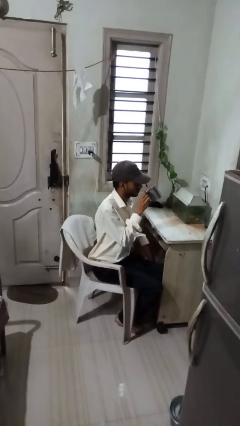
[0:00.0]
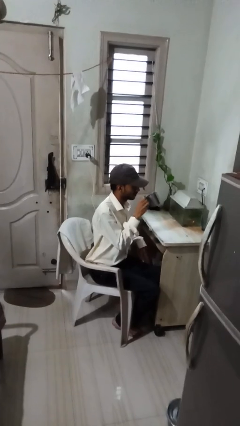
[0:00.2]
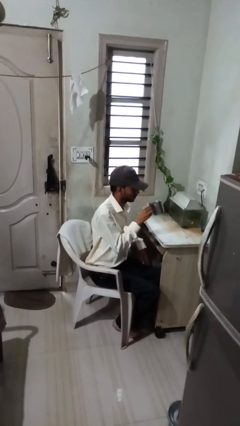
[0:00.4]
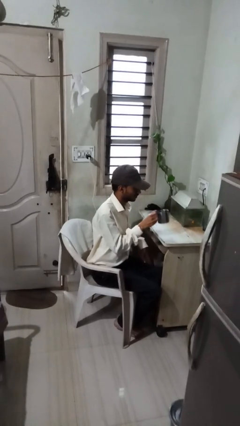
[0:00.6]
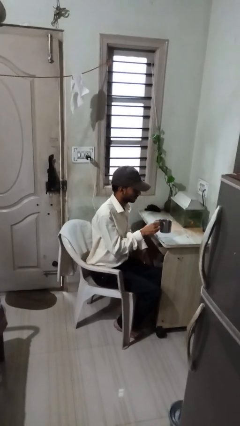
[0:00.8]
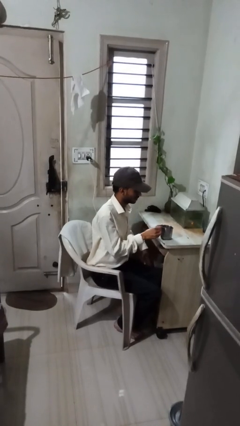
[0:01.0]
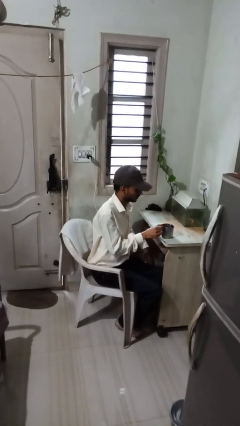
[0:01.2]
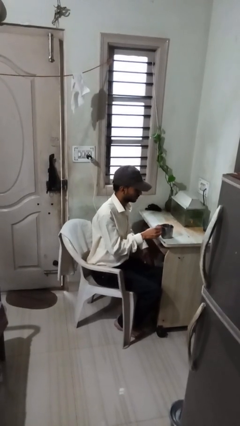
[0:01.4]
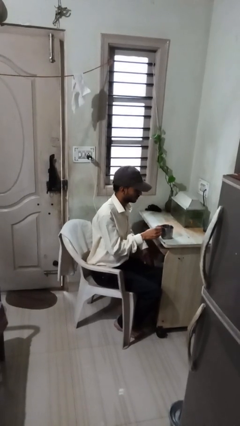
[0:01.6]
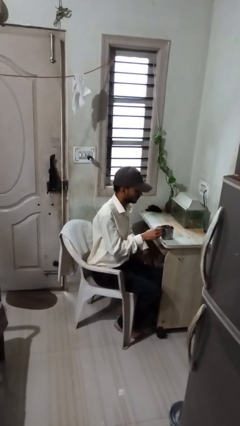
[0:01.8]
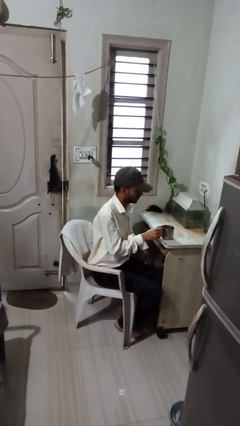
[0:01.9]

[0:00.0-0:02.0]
person puts down object on table

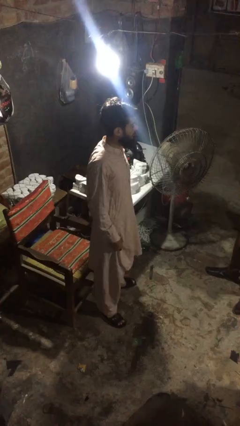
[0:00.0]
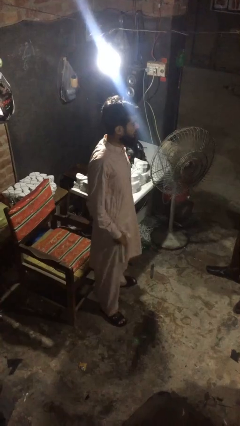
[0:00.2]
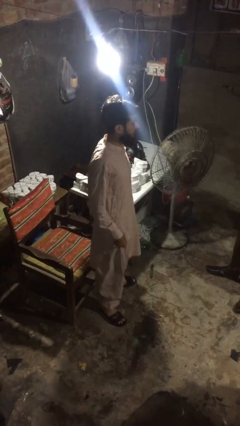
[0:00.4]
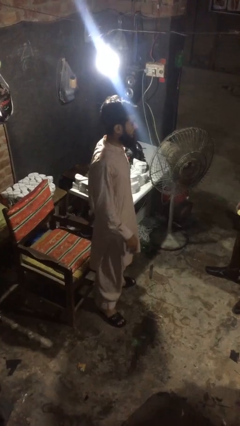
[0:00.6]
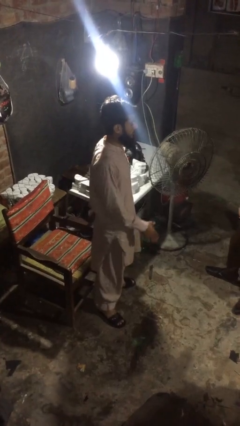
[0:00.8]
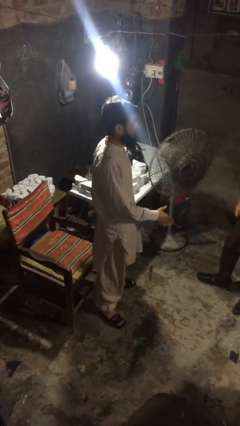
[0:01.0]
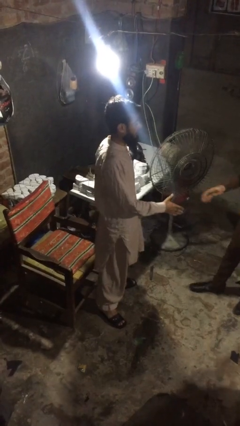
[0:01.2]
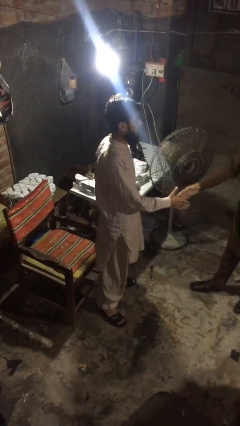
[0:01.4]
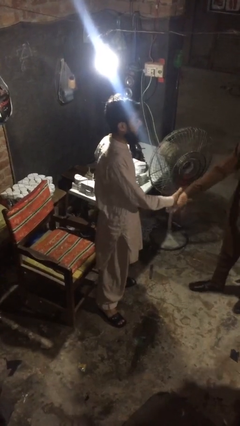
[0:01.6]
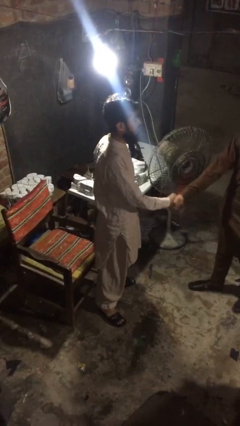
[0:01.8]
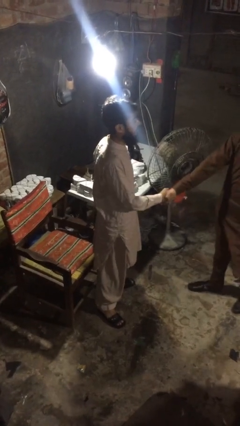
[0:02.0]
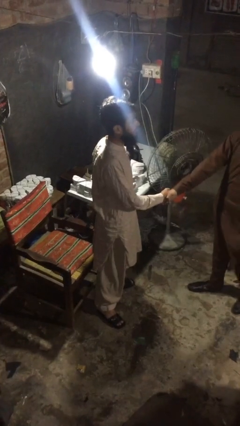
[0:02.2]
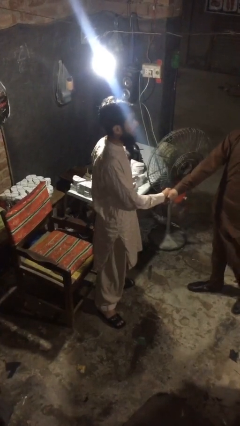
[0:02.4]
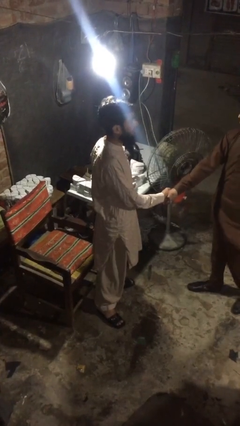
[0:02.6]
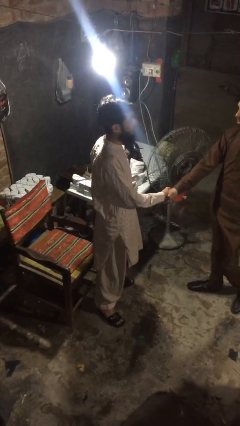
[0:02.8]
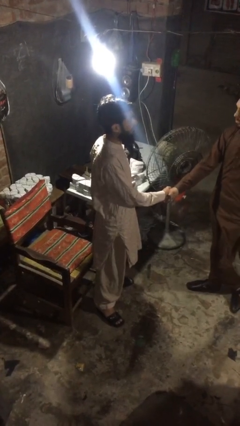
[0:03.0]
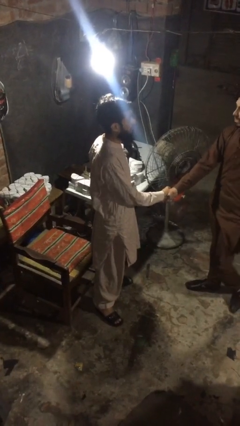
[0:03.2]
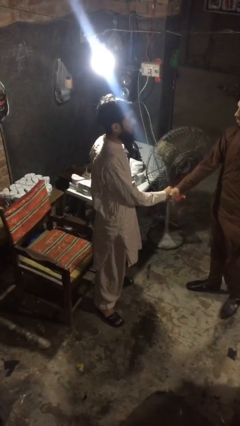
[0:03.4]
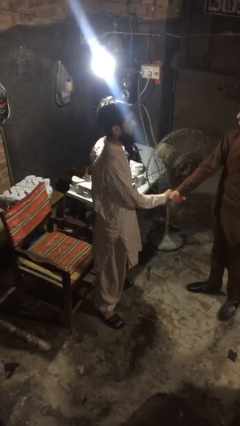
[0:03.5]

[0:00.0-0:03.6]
person shakes hand

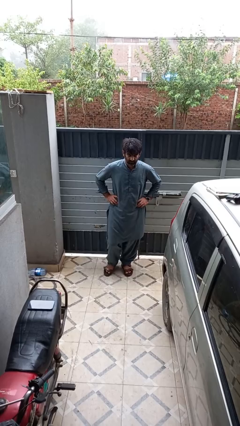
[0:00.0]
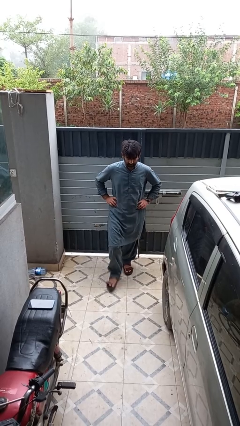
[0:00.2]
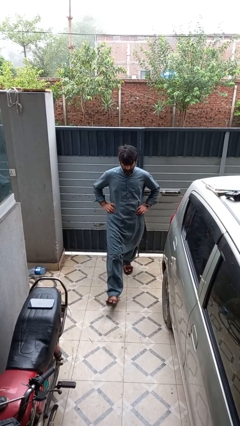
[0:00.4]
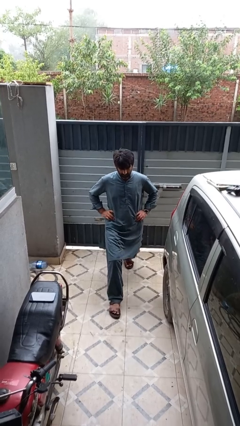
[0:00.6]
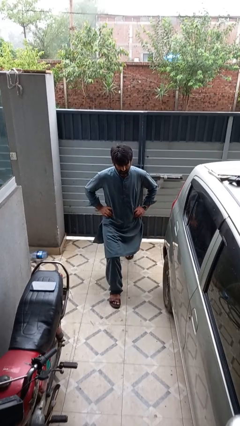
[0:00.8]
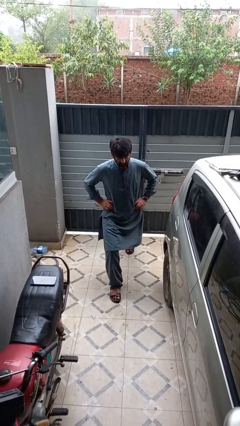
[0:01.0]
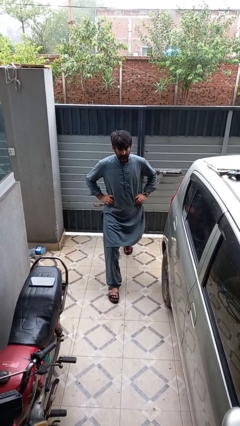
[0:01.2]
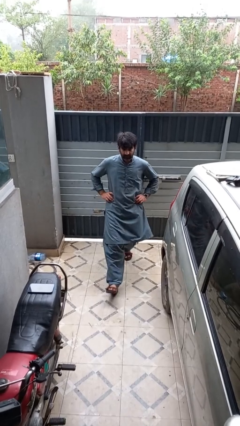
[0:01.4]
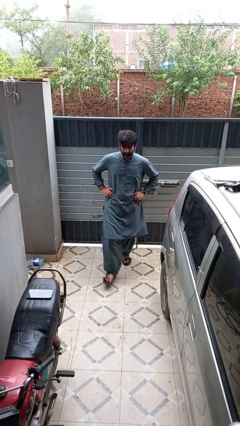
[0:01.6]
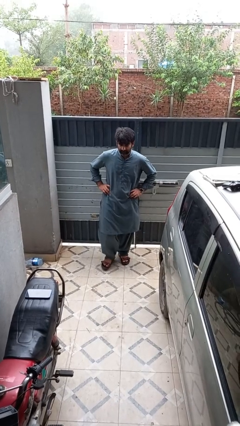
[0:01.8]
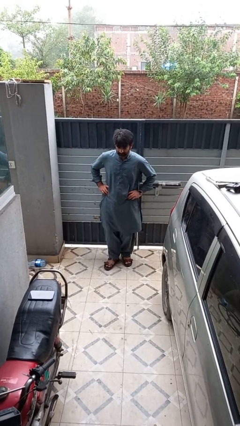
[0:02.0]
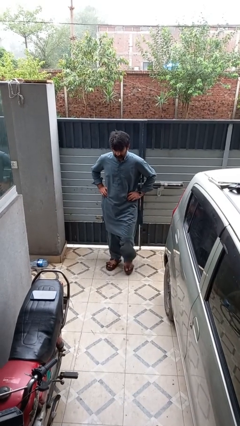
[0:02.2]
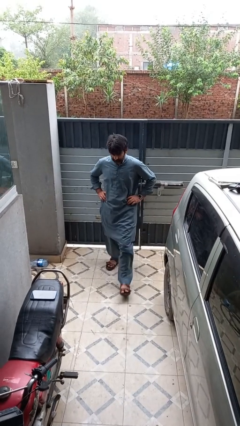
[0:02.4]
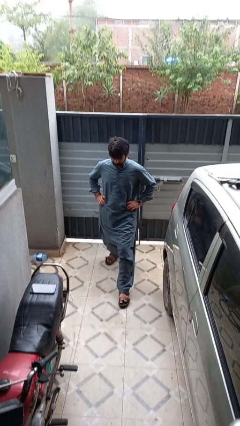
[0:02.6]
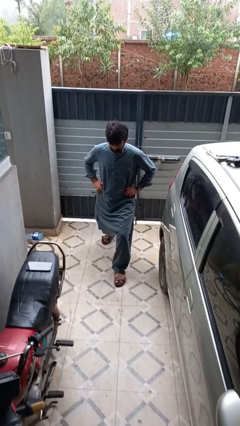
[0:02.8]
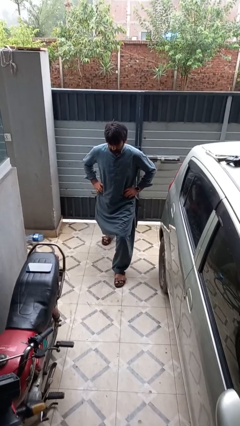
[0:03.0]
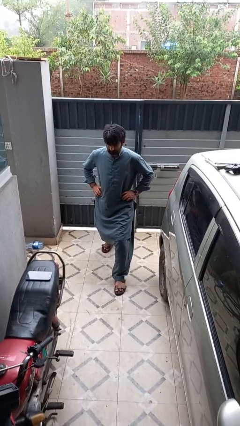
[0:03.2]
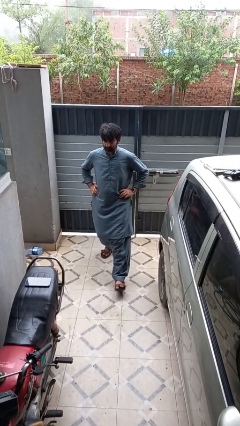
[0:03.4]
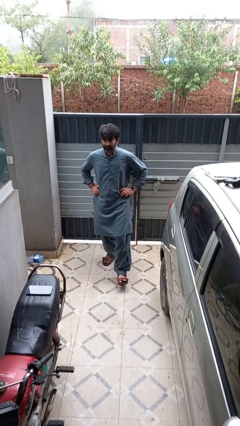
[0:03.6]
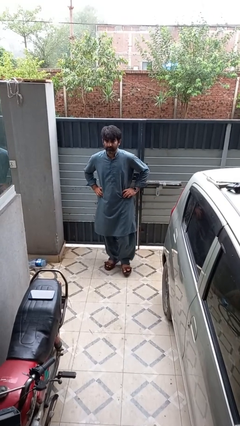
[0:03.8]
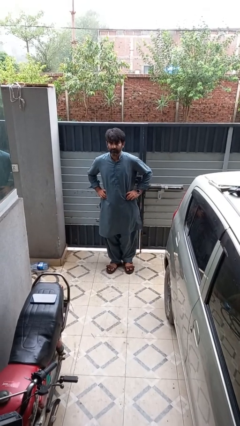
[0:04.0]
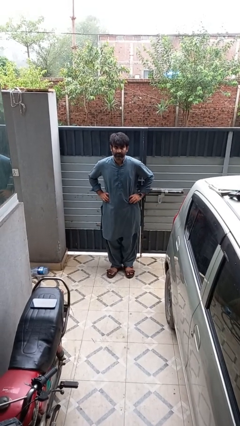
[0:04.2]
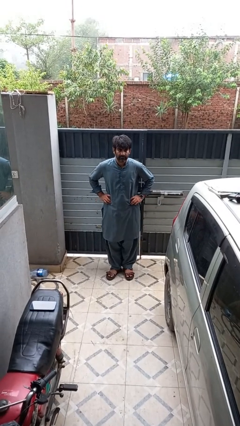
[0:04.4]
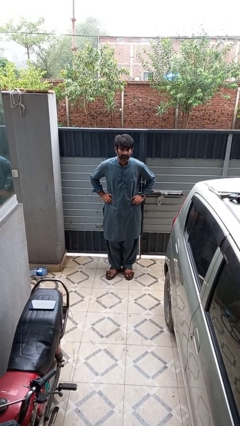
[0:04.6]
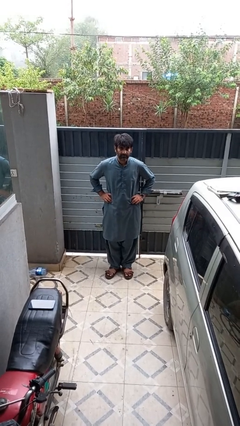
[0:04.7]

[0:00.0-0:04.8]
person exercises with lunges

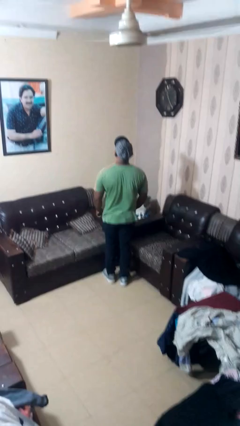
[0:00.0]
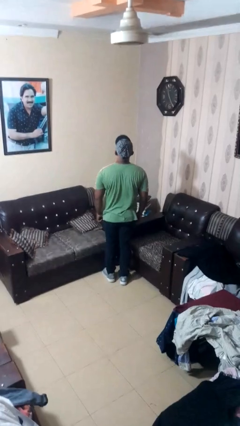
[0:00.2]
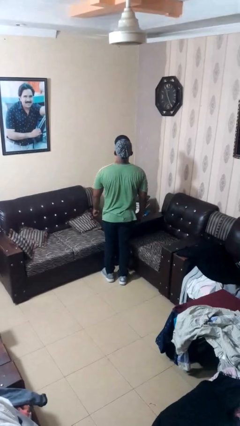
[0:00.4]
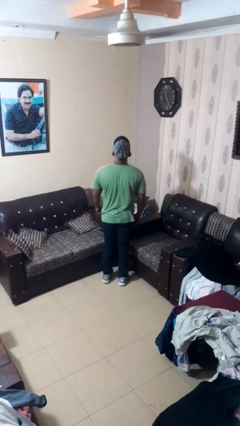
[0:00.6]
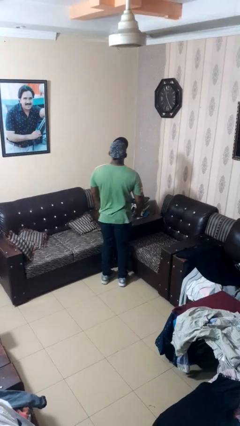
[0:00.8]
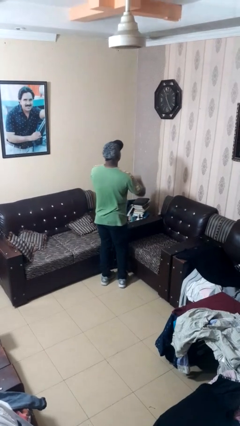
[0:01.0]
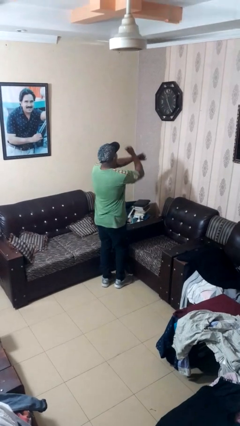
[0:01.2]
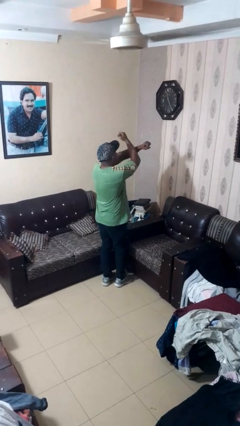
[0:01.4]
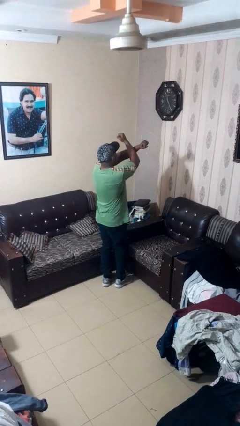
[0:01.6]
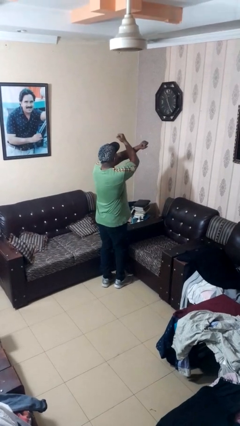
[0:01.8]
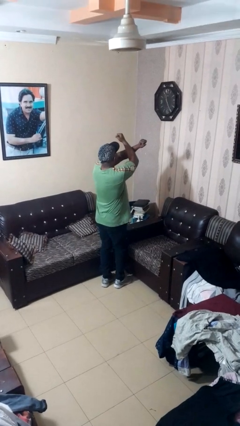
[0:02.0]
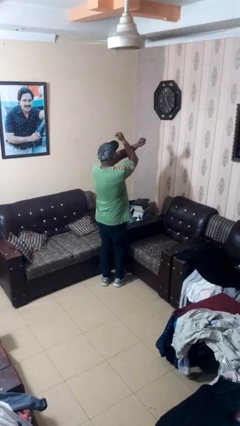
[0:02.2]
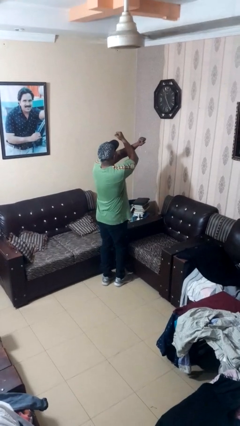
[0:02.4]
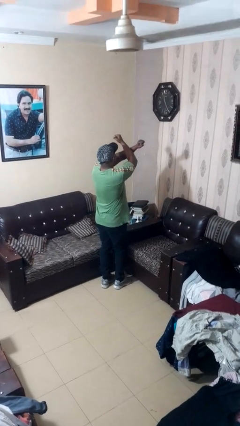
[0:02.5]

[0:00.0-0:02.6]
person gestures arms x

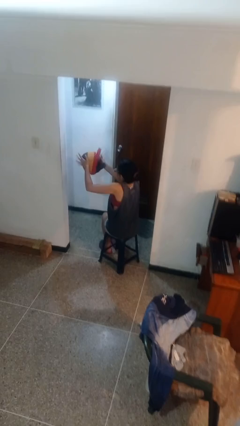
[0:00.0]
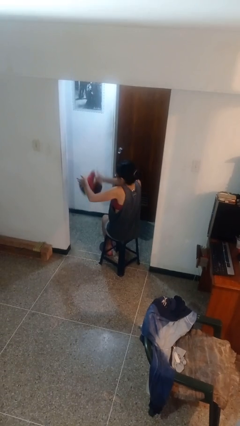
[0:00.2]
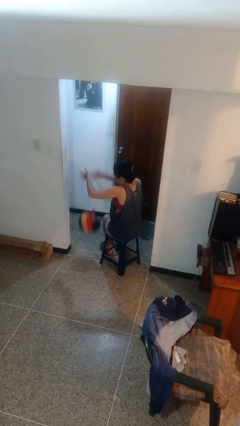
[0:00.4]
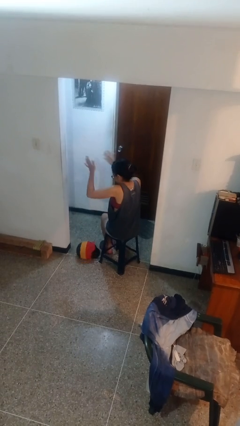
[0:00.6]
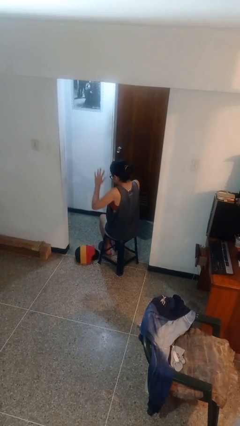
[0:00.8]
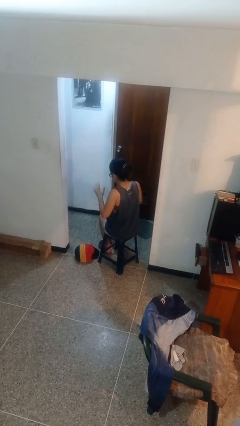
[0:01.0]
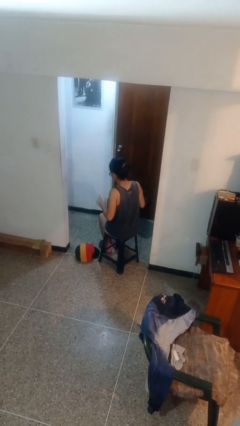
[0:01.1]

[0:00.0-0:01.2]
person catches dropped object

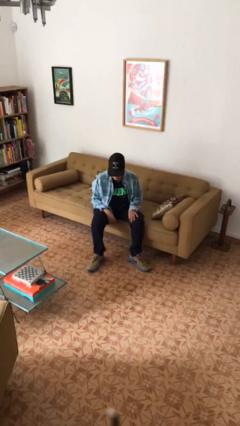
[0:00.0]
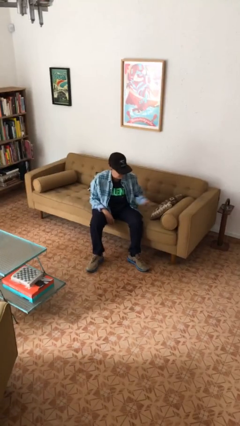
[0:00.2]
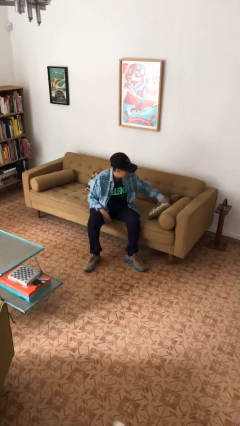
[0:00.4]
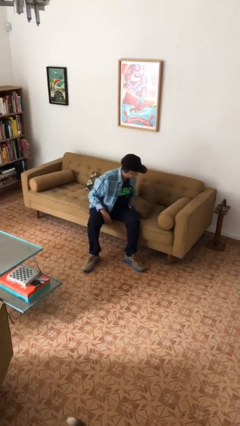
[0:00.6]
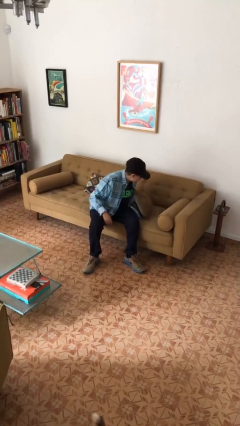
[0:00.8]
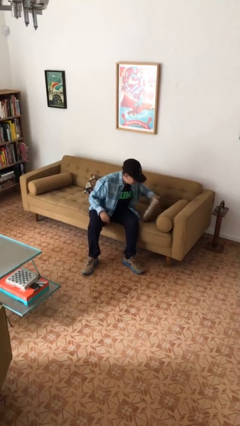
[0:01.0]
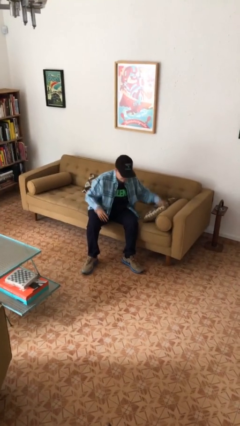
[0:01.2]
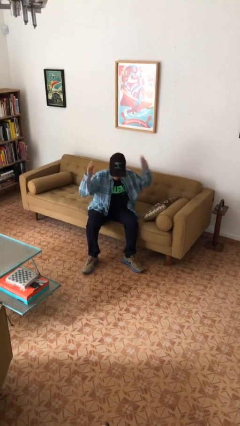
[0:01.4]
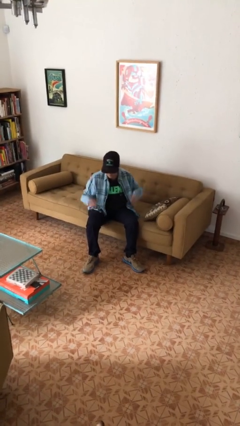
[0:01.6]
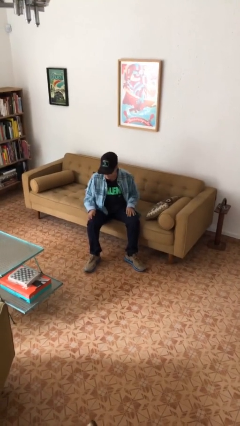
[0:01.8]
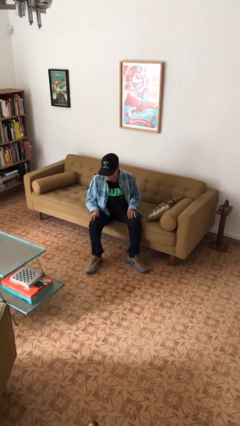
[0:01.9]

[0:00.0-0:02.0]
person searches in couch

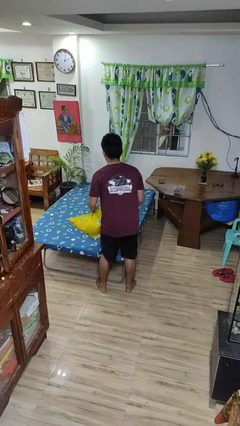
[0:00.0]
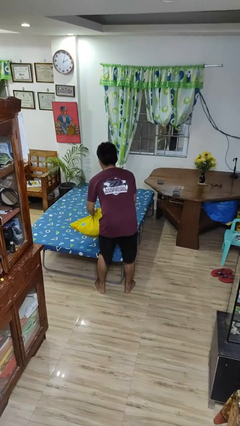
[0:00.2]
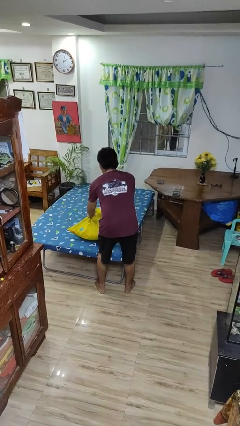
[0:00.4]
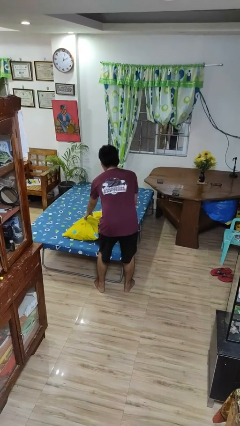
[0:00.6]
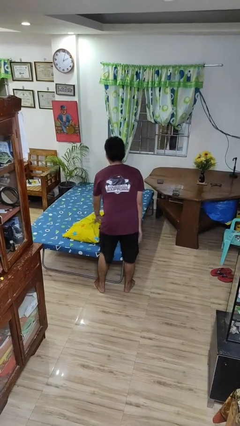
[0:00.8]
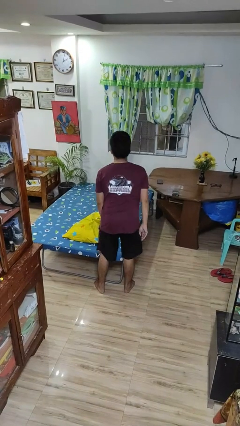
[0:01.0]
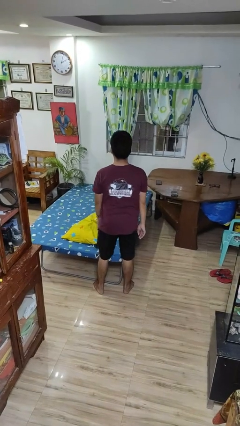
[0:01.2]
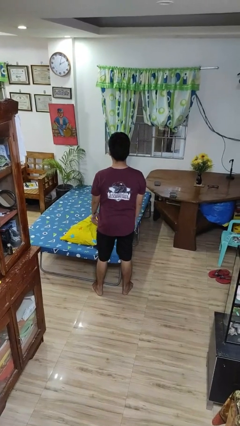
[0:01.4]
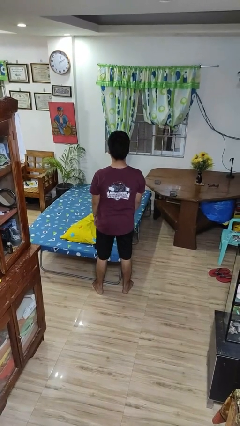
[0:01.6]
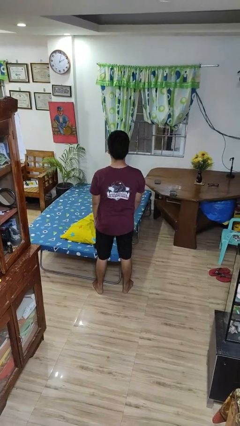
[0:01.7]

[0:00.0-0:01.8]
person puts down object on bed
